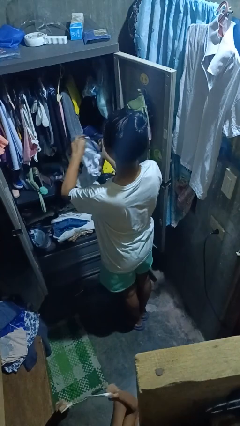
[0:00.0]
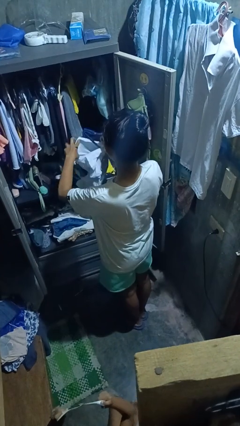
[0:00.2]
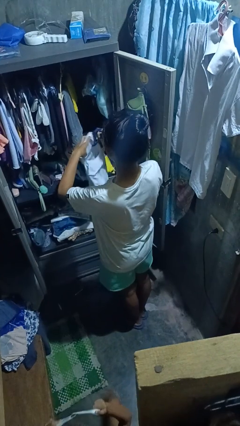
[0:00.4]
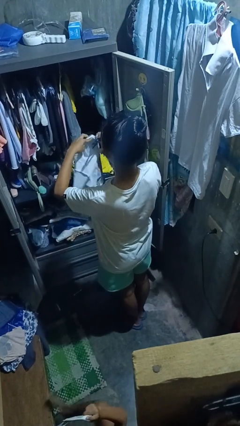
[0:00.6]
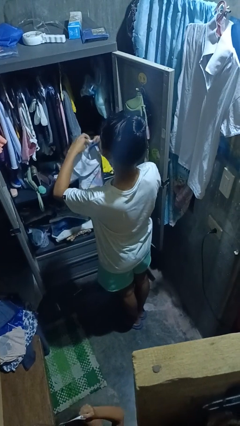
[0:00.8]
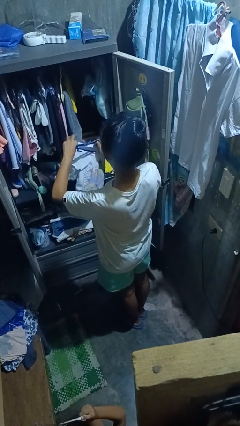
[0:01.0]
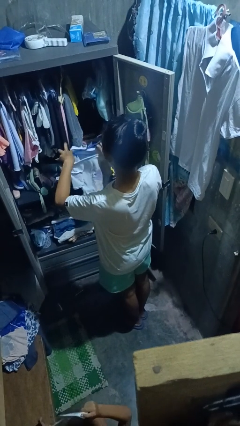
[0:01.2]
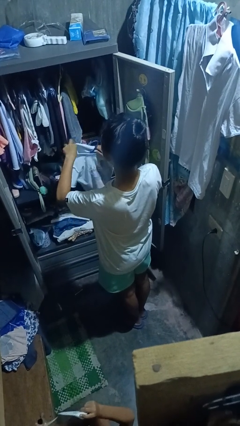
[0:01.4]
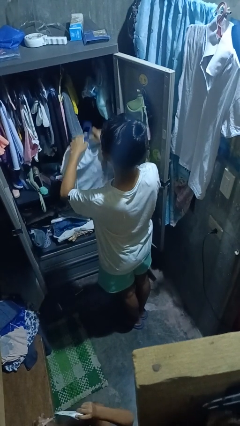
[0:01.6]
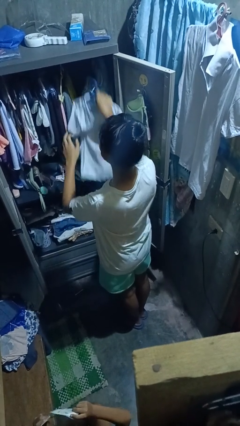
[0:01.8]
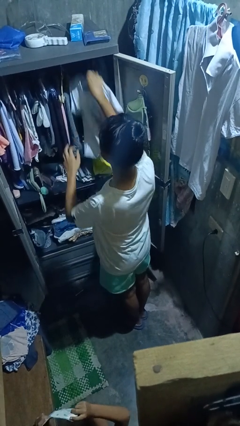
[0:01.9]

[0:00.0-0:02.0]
person puts clothes into closet

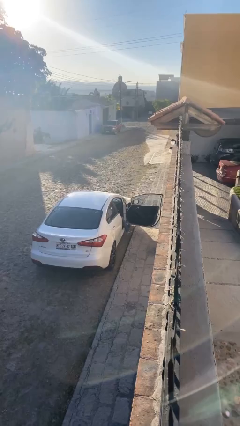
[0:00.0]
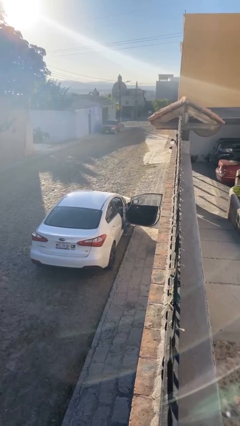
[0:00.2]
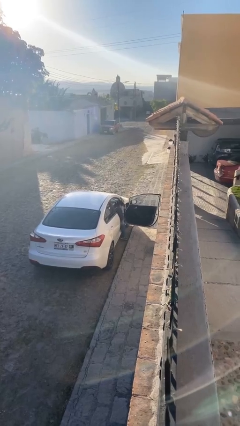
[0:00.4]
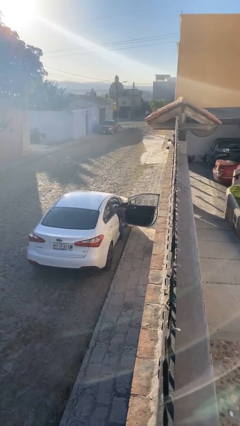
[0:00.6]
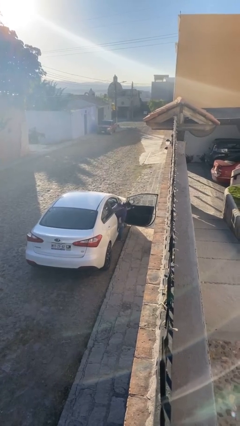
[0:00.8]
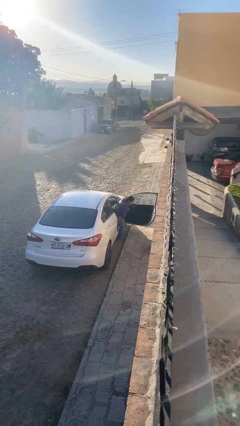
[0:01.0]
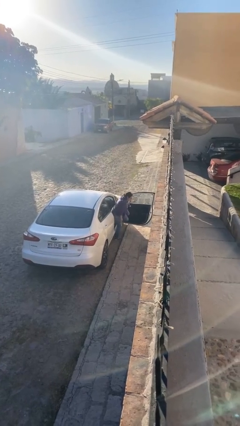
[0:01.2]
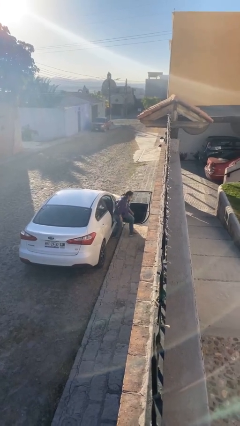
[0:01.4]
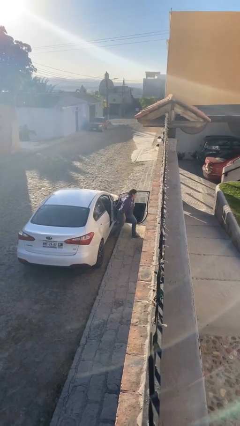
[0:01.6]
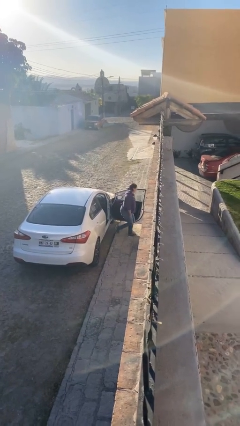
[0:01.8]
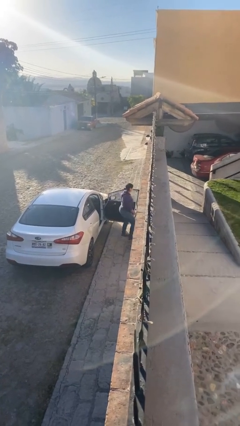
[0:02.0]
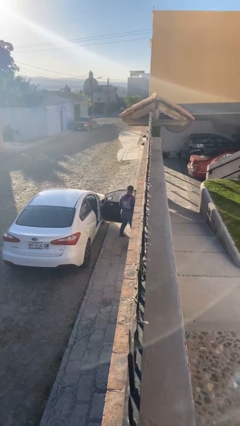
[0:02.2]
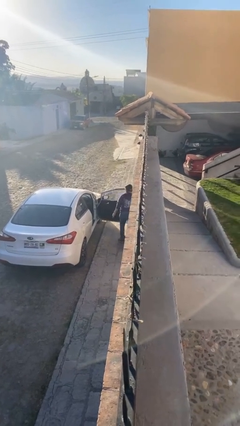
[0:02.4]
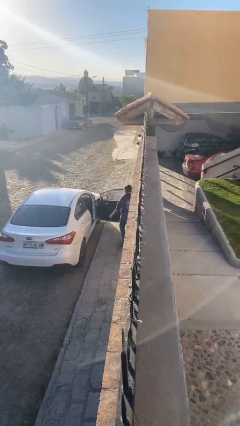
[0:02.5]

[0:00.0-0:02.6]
person exits car

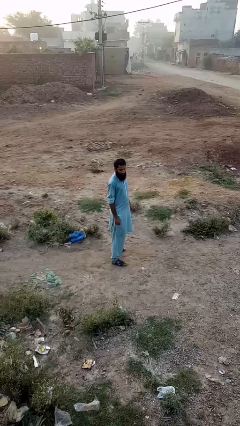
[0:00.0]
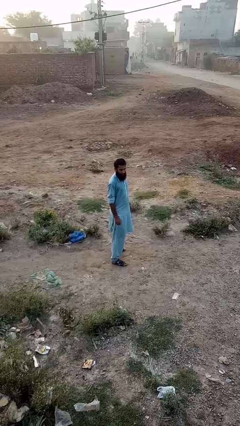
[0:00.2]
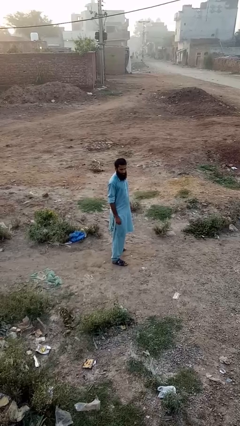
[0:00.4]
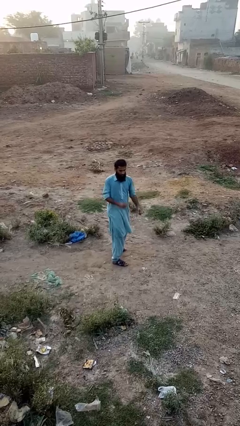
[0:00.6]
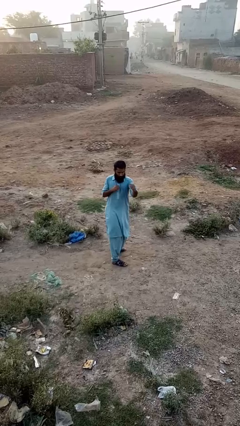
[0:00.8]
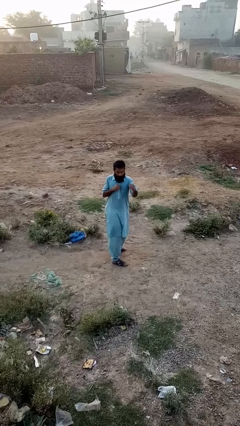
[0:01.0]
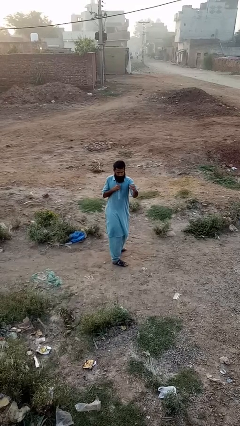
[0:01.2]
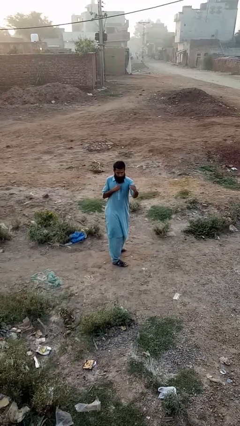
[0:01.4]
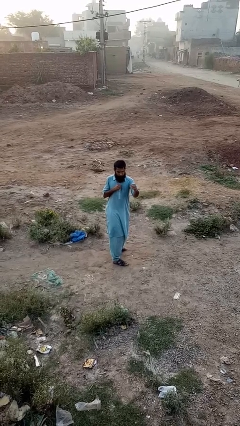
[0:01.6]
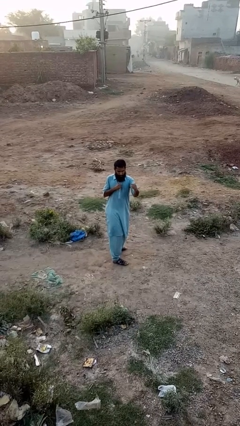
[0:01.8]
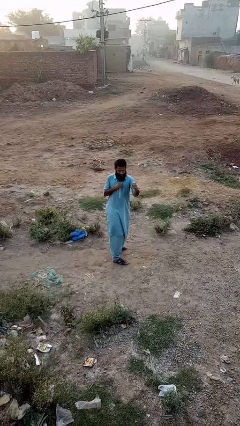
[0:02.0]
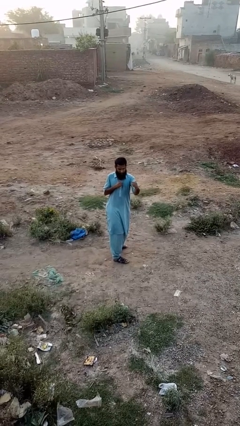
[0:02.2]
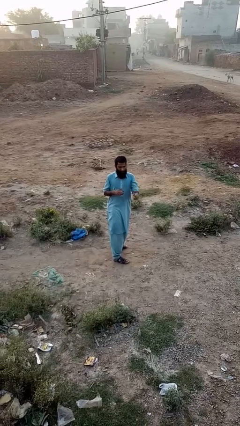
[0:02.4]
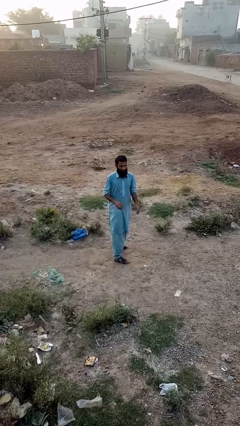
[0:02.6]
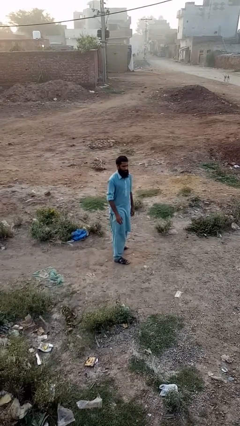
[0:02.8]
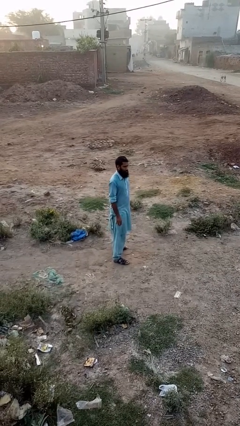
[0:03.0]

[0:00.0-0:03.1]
person karate chop

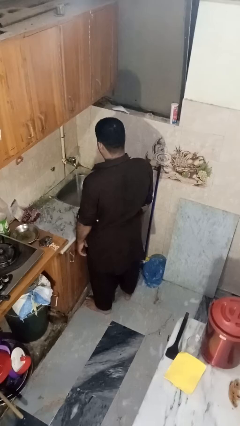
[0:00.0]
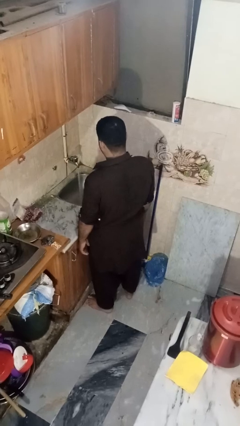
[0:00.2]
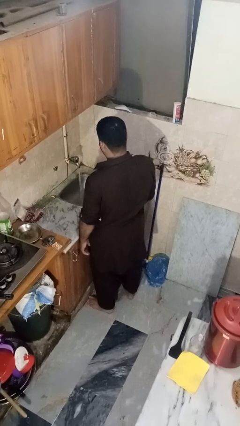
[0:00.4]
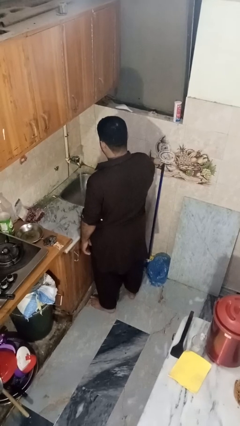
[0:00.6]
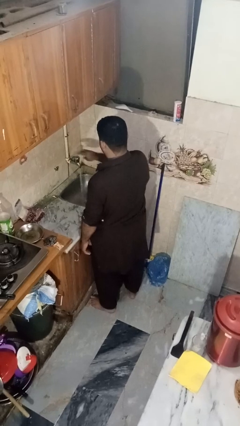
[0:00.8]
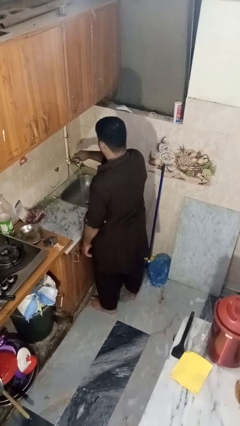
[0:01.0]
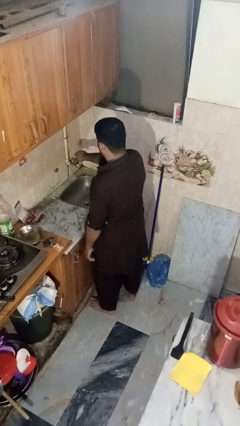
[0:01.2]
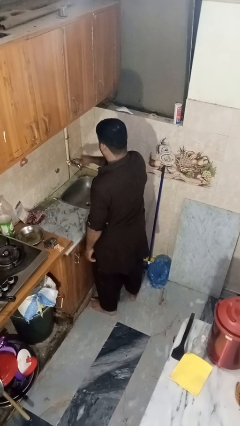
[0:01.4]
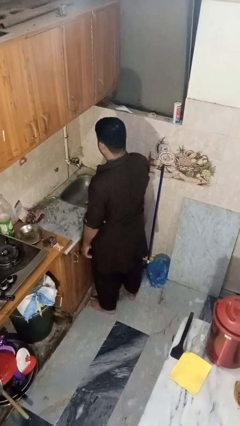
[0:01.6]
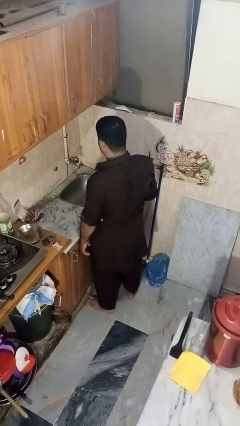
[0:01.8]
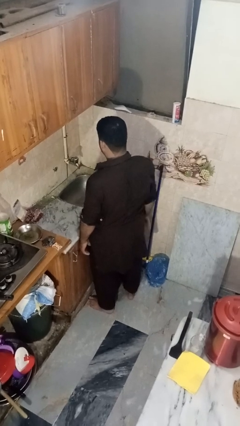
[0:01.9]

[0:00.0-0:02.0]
person turns off faucet

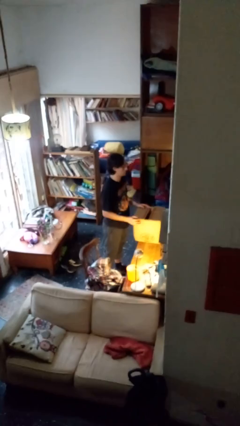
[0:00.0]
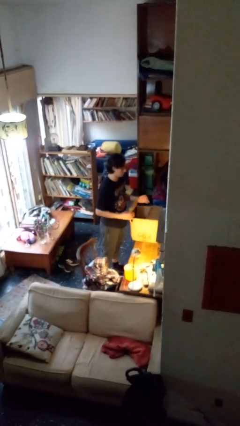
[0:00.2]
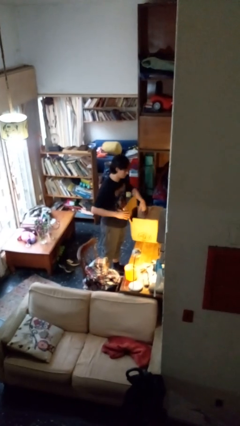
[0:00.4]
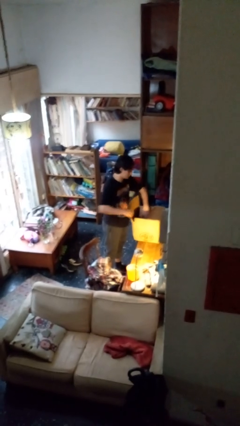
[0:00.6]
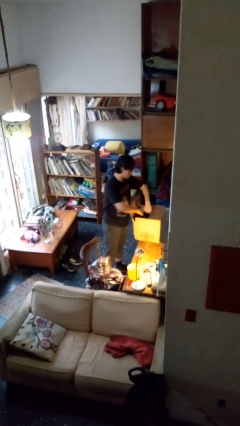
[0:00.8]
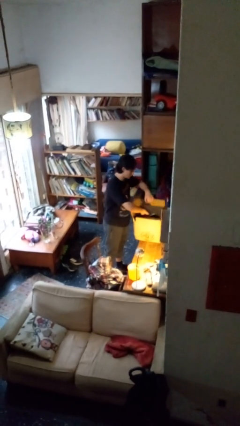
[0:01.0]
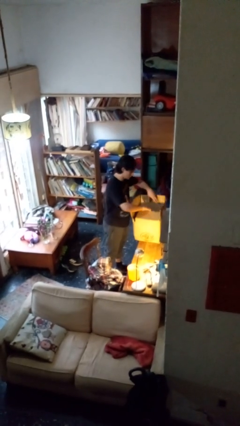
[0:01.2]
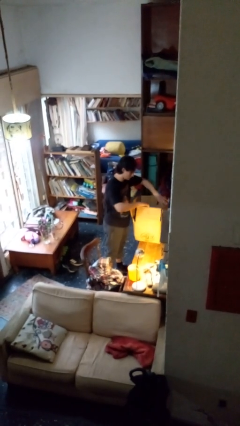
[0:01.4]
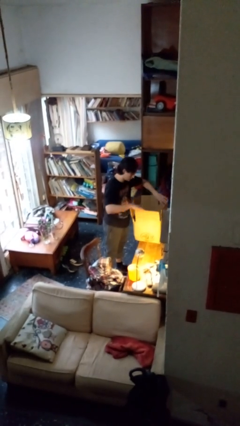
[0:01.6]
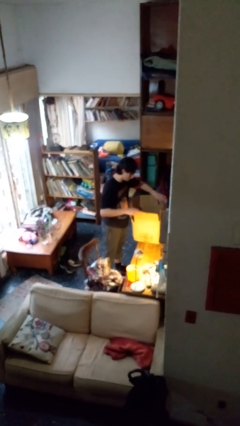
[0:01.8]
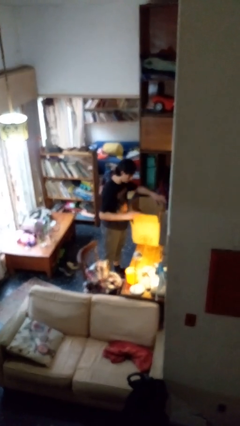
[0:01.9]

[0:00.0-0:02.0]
person opens box

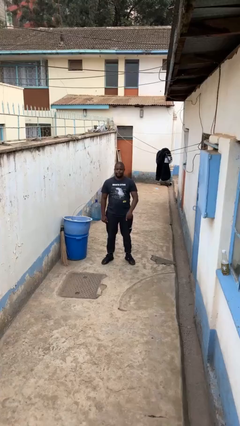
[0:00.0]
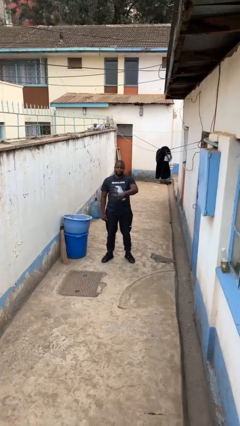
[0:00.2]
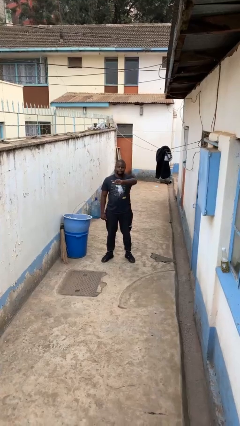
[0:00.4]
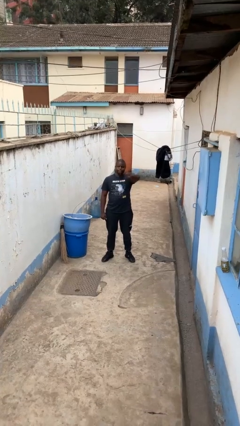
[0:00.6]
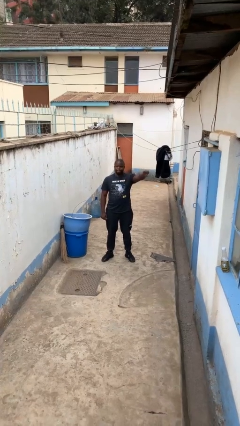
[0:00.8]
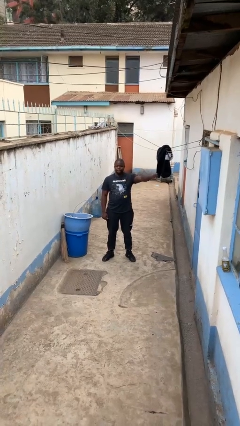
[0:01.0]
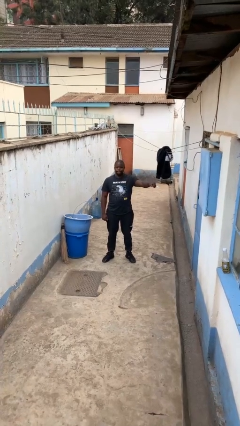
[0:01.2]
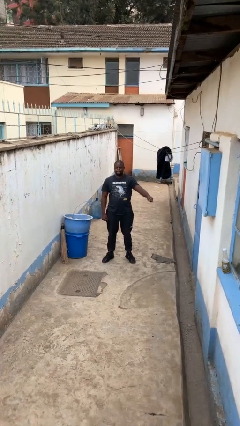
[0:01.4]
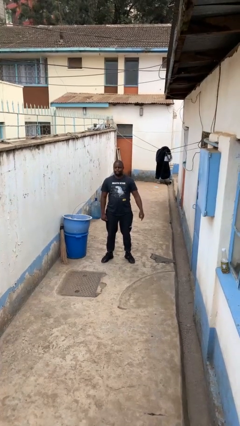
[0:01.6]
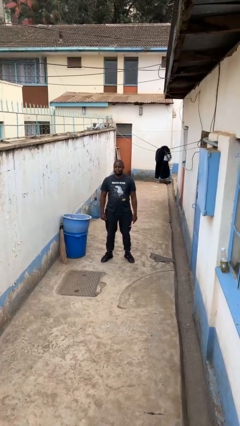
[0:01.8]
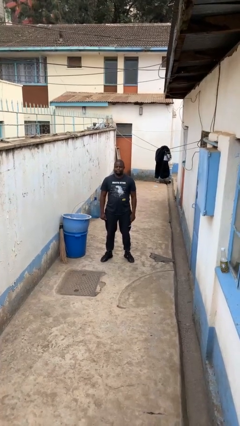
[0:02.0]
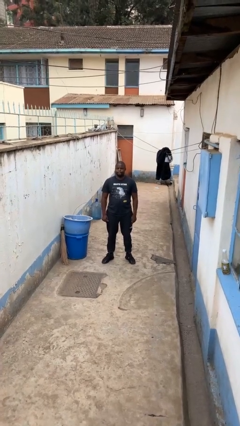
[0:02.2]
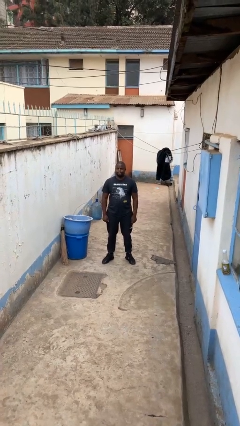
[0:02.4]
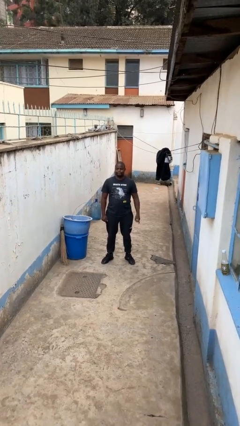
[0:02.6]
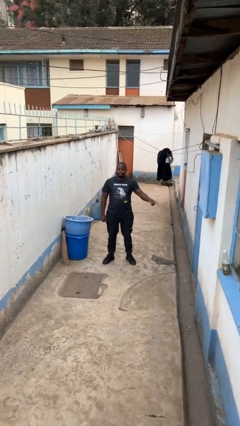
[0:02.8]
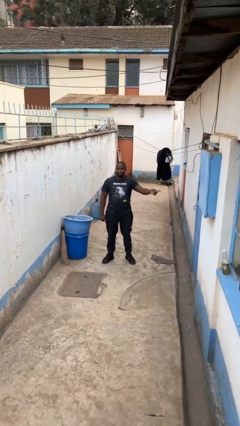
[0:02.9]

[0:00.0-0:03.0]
person gestures swipe left

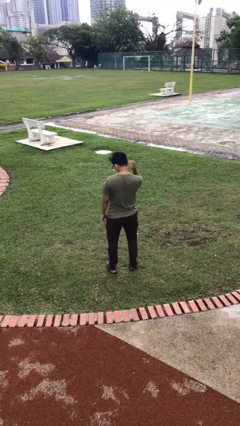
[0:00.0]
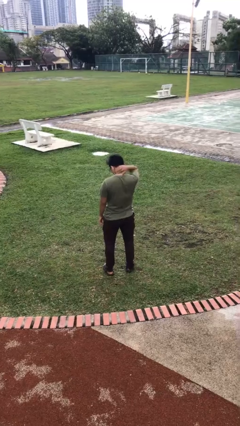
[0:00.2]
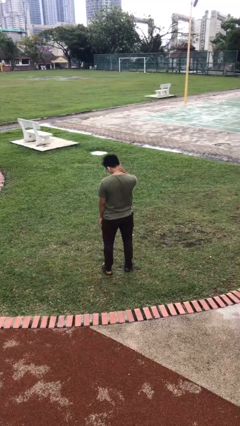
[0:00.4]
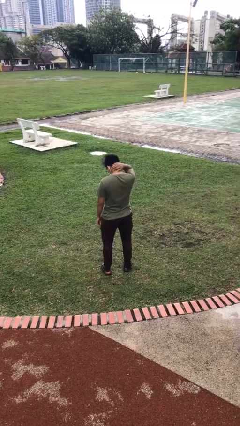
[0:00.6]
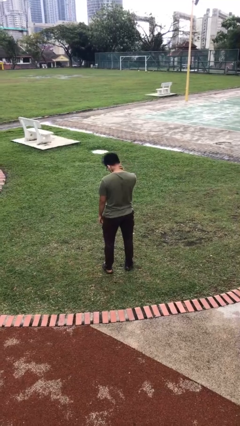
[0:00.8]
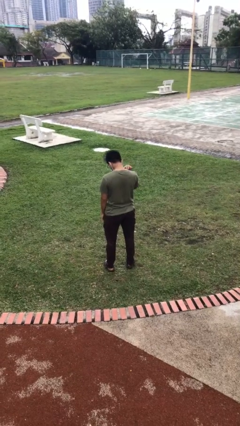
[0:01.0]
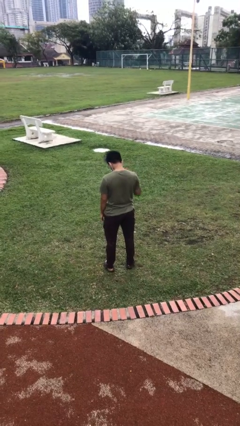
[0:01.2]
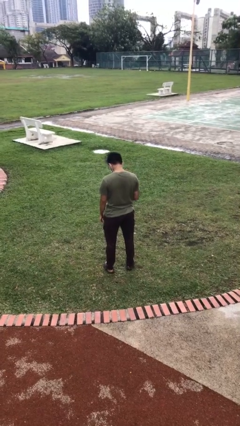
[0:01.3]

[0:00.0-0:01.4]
person rubs neck

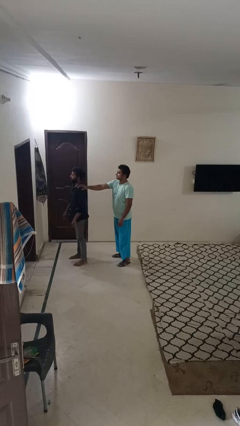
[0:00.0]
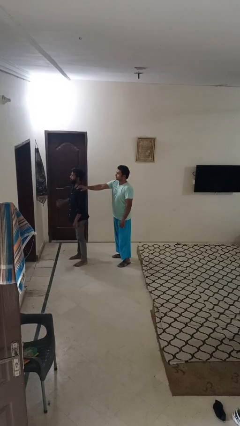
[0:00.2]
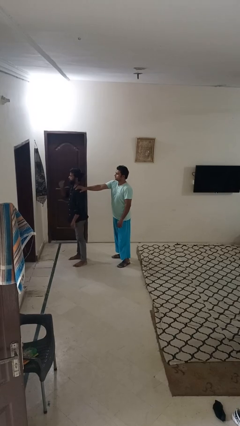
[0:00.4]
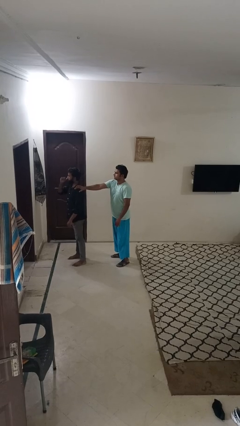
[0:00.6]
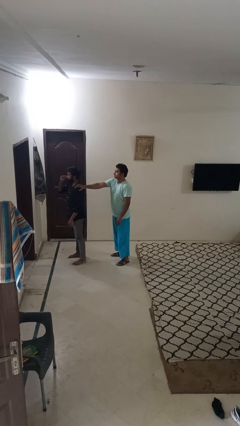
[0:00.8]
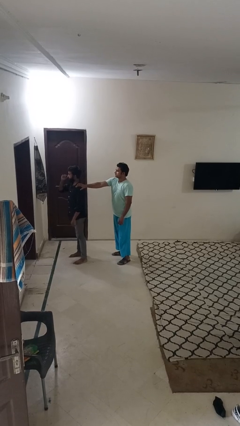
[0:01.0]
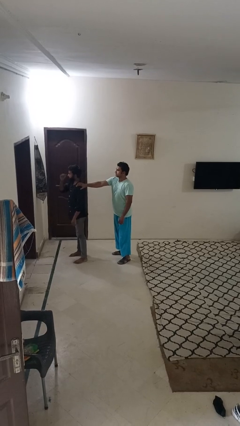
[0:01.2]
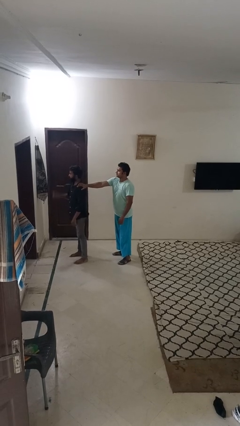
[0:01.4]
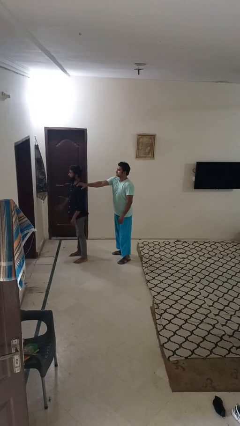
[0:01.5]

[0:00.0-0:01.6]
person grabs person by shoulder
